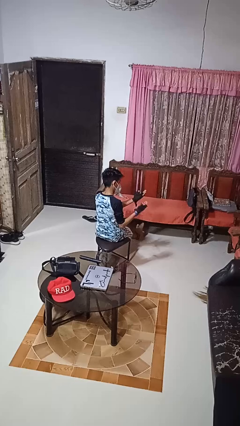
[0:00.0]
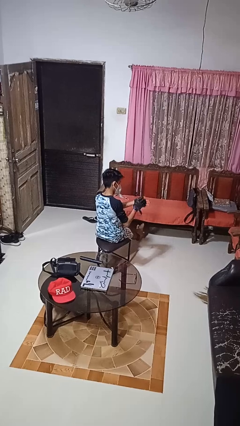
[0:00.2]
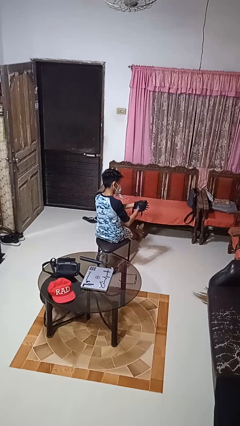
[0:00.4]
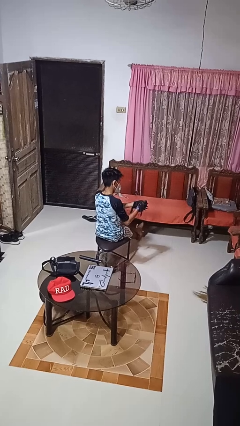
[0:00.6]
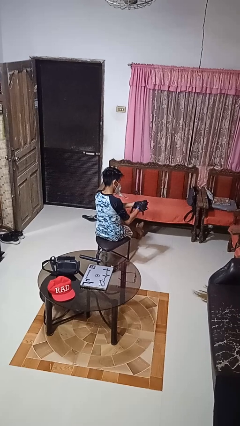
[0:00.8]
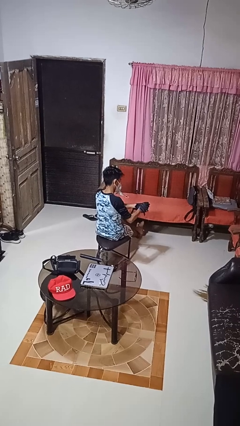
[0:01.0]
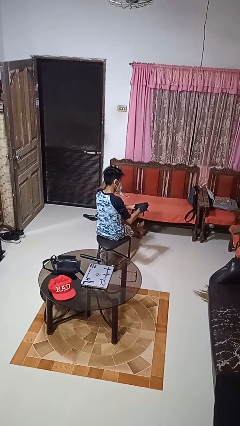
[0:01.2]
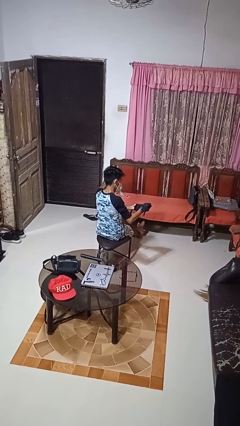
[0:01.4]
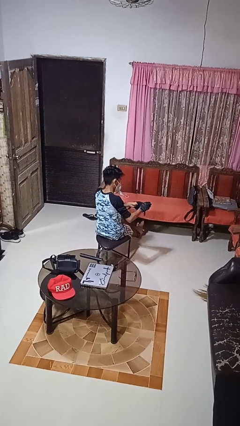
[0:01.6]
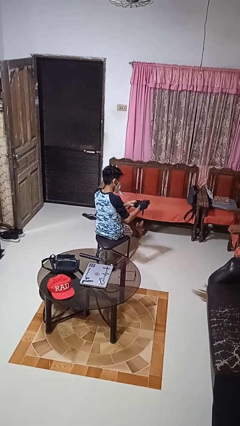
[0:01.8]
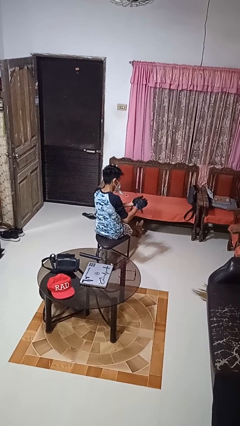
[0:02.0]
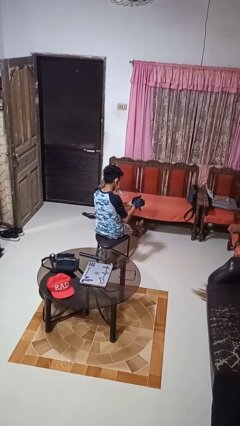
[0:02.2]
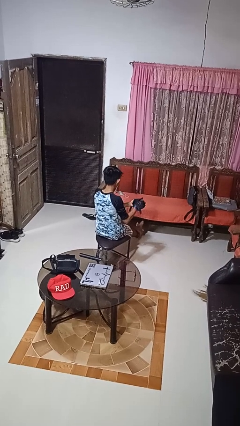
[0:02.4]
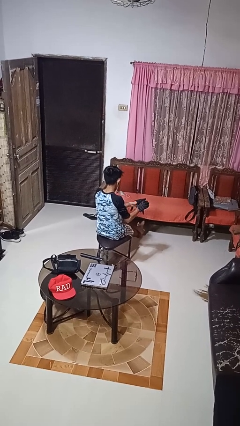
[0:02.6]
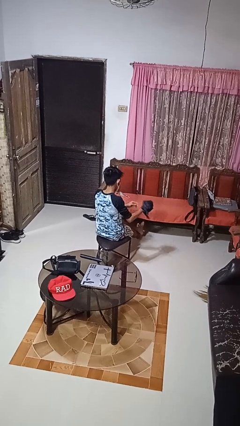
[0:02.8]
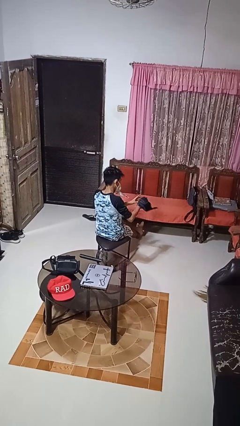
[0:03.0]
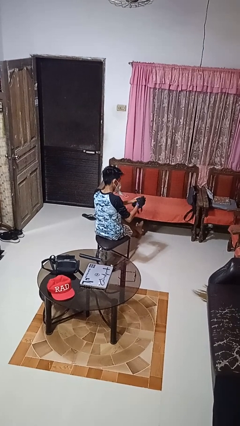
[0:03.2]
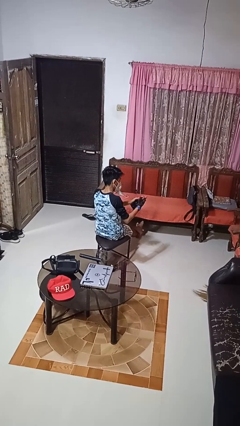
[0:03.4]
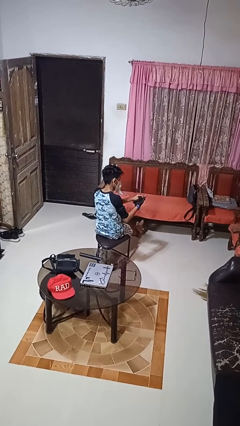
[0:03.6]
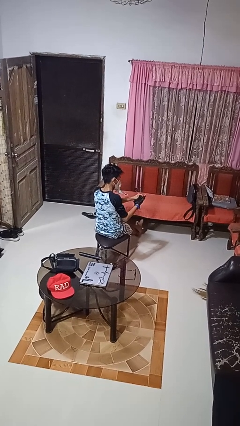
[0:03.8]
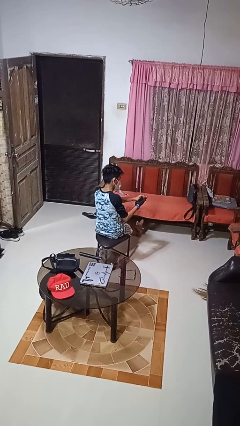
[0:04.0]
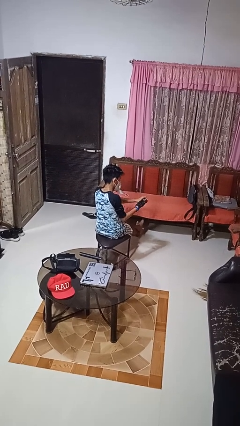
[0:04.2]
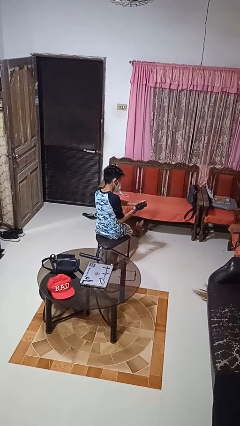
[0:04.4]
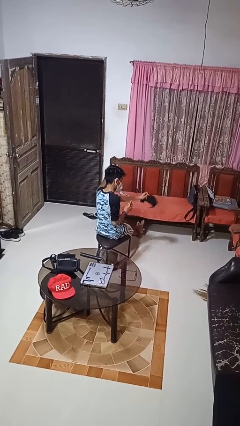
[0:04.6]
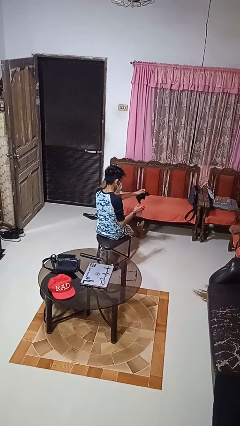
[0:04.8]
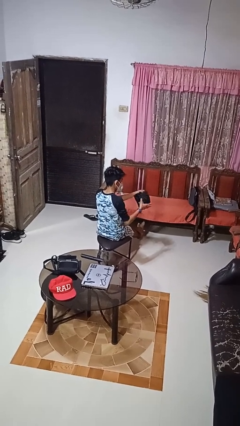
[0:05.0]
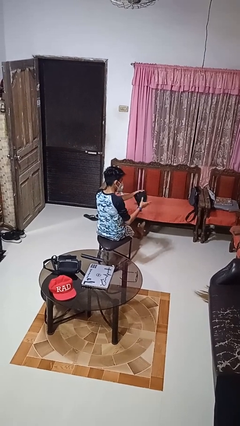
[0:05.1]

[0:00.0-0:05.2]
person takes off gloves

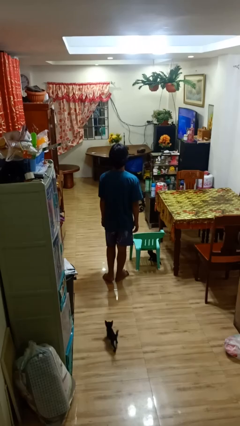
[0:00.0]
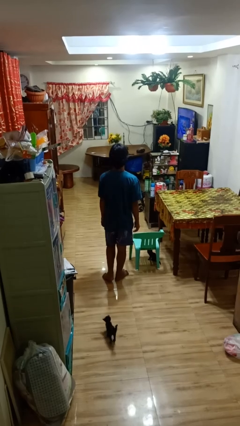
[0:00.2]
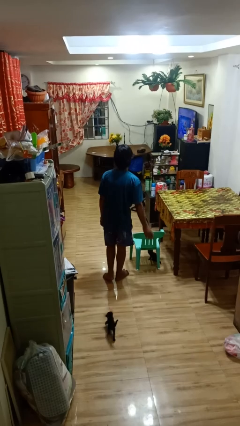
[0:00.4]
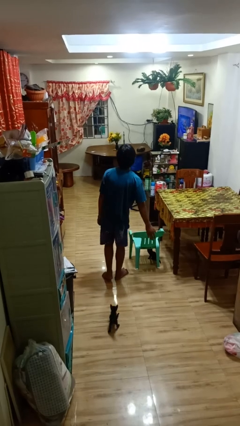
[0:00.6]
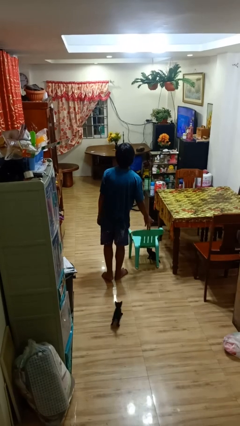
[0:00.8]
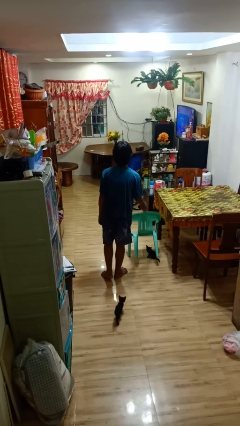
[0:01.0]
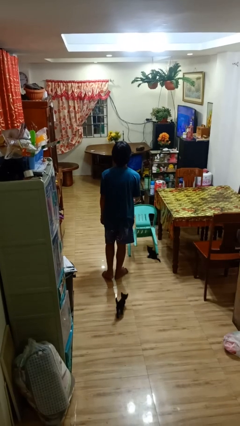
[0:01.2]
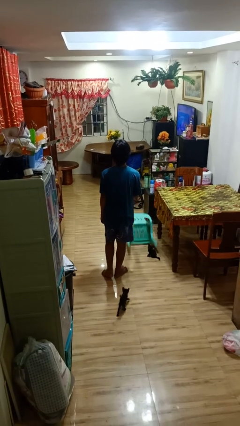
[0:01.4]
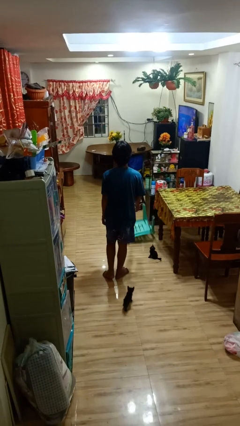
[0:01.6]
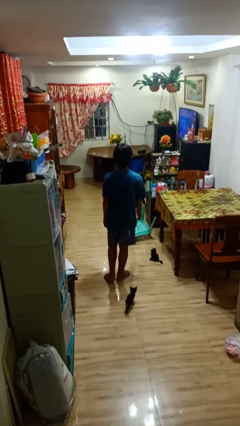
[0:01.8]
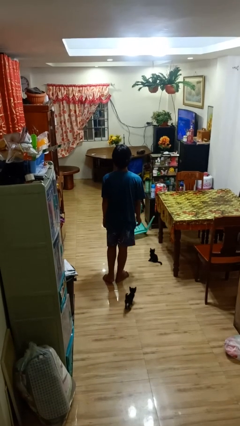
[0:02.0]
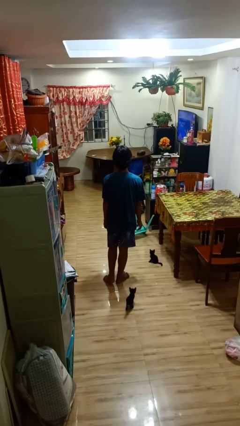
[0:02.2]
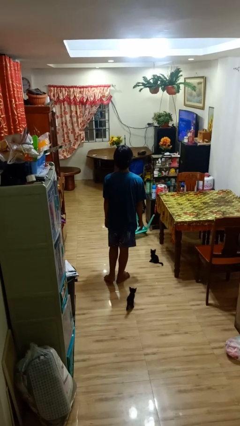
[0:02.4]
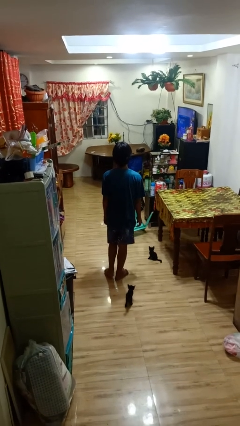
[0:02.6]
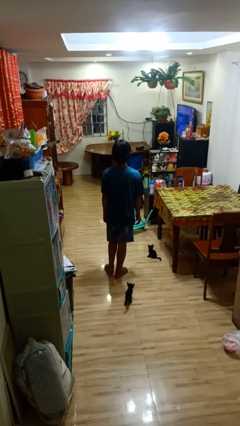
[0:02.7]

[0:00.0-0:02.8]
person knocks over furniture

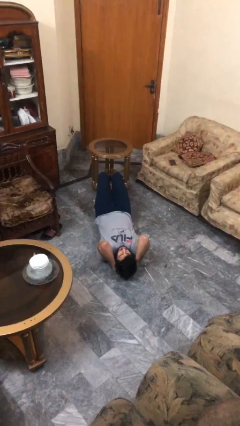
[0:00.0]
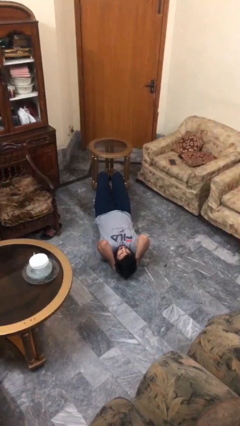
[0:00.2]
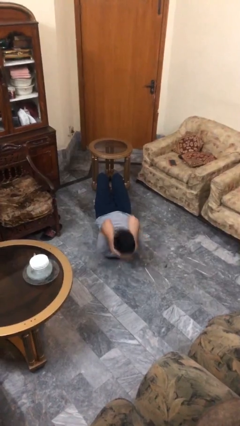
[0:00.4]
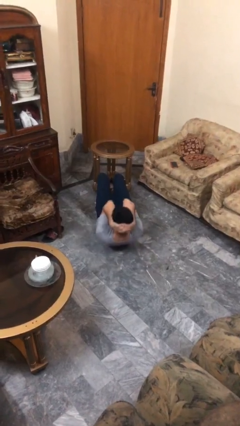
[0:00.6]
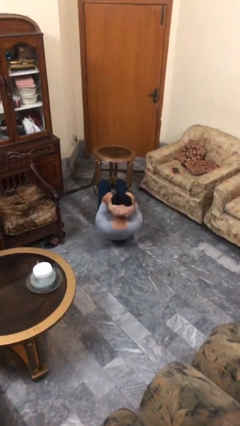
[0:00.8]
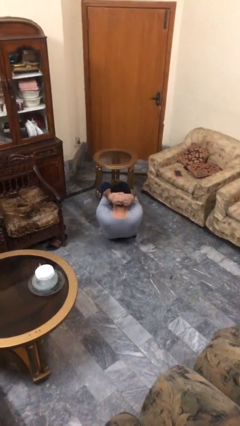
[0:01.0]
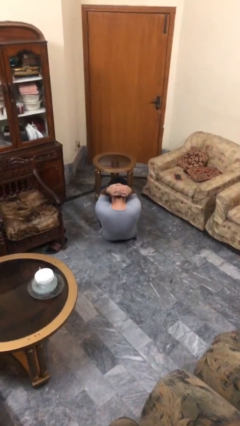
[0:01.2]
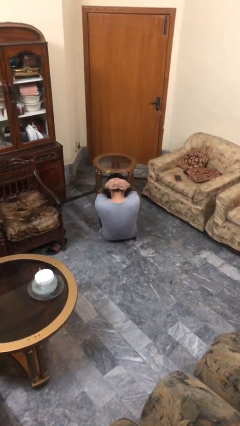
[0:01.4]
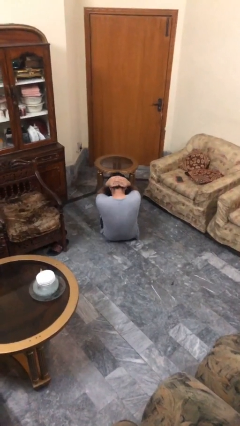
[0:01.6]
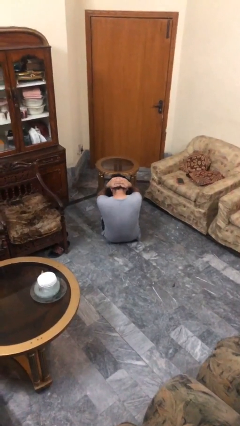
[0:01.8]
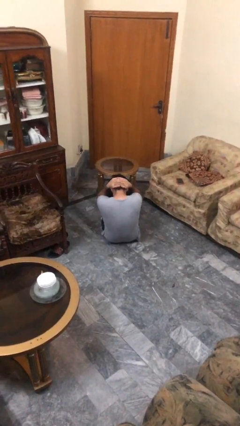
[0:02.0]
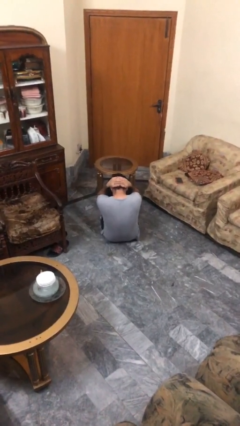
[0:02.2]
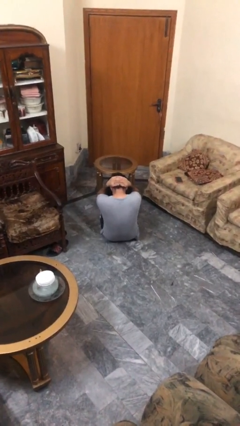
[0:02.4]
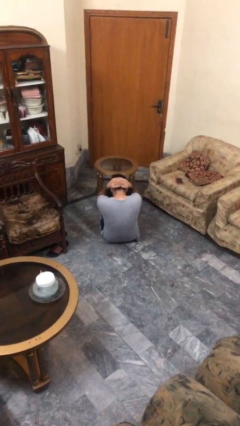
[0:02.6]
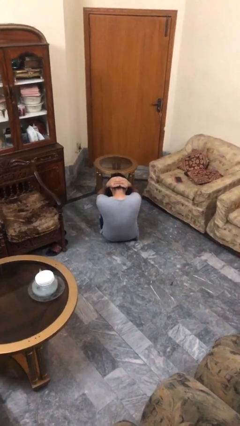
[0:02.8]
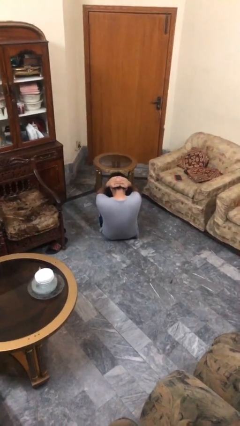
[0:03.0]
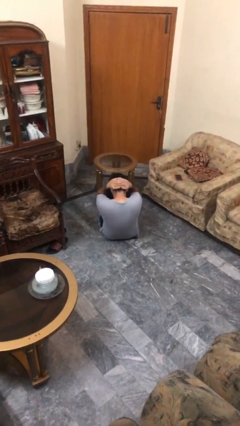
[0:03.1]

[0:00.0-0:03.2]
person exercises with situp

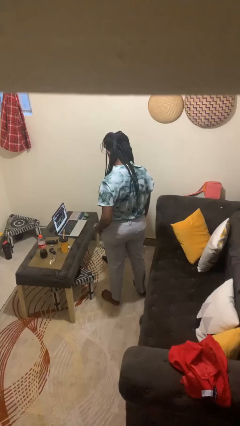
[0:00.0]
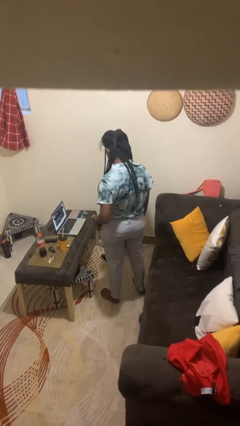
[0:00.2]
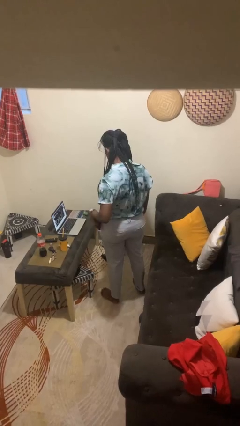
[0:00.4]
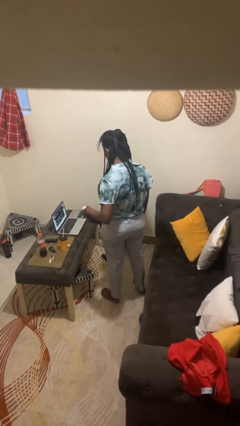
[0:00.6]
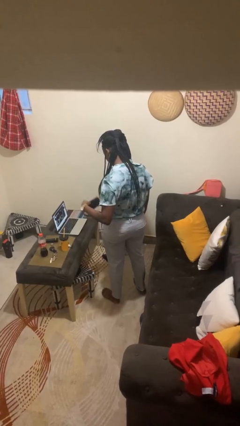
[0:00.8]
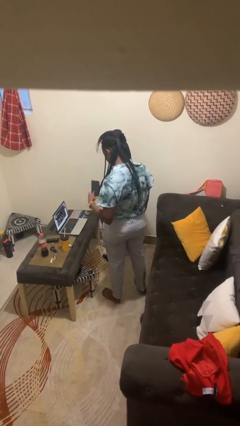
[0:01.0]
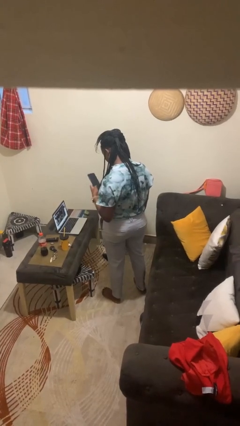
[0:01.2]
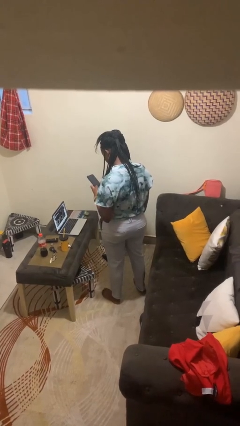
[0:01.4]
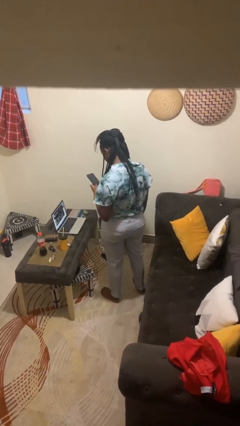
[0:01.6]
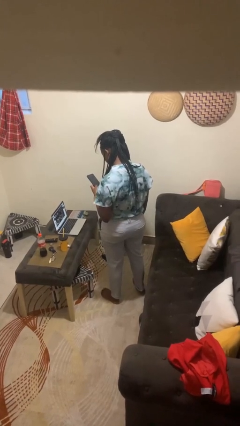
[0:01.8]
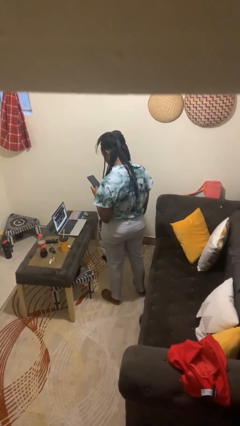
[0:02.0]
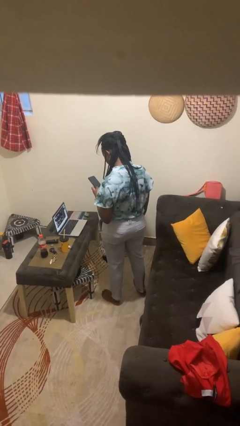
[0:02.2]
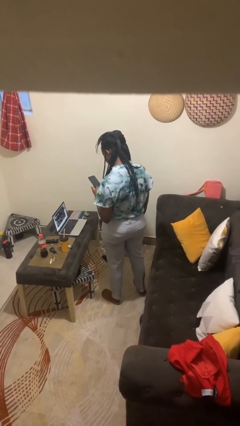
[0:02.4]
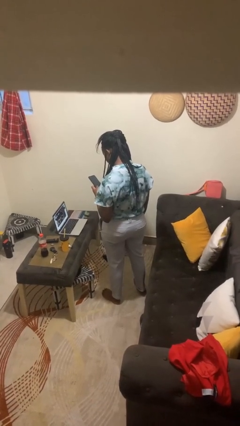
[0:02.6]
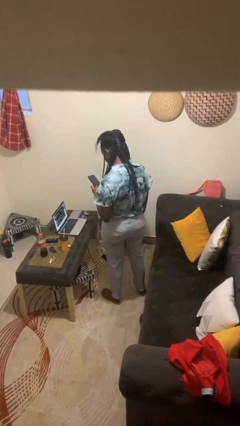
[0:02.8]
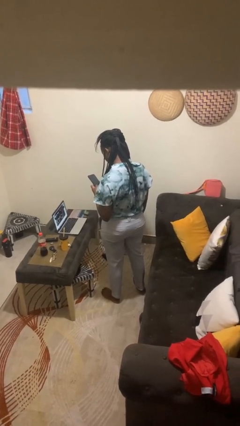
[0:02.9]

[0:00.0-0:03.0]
person takes phone from pocket

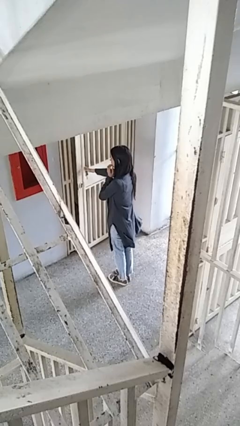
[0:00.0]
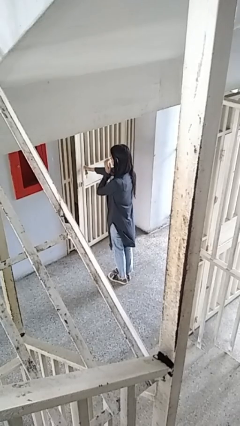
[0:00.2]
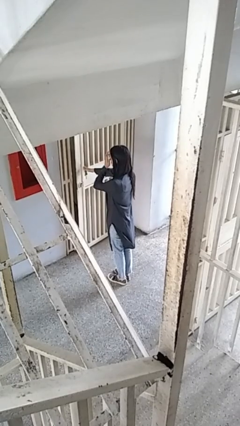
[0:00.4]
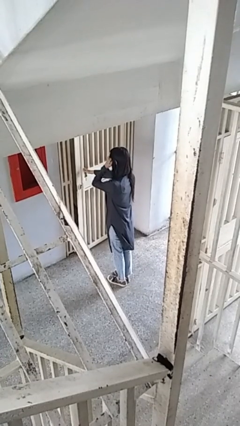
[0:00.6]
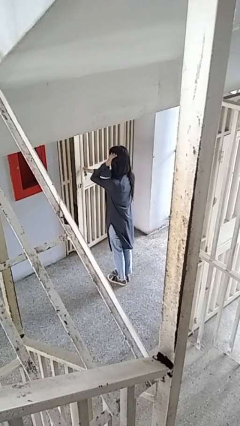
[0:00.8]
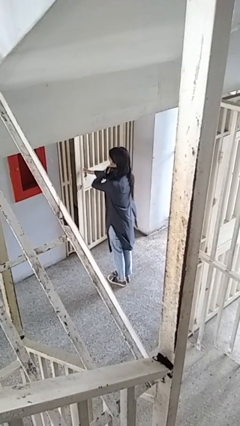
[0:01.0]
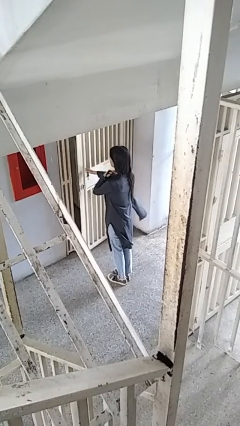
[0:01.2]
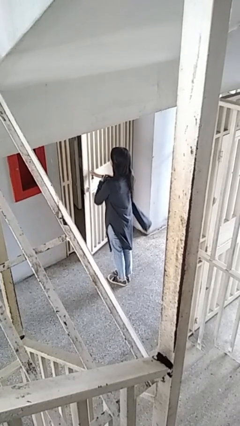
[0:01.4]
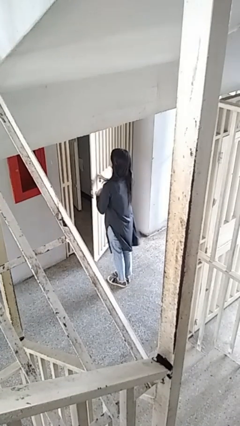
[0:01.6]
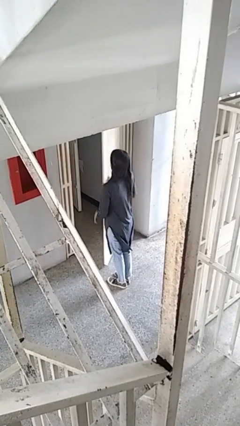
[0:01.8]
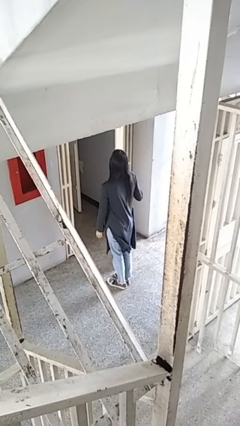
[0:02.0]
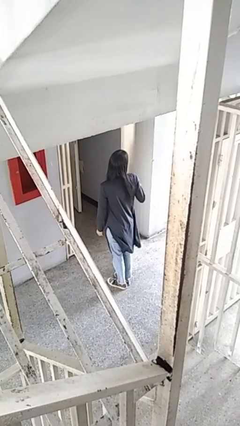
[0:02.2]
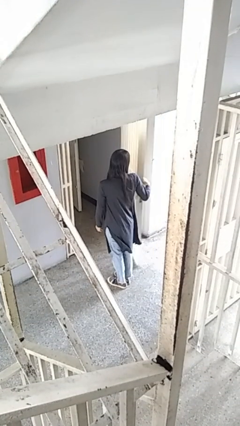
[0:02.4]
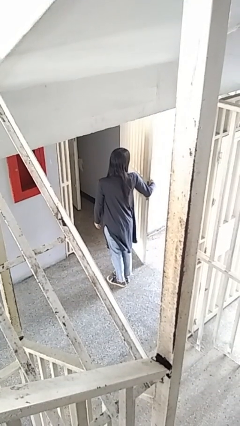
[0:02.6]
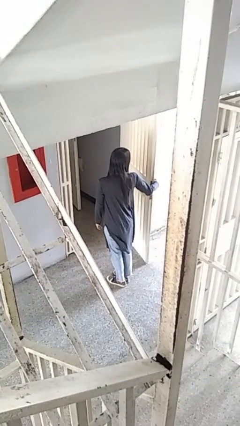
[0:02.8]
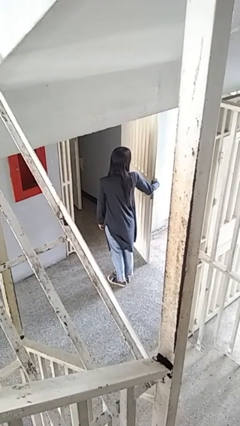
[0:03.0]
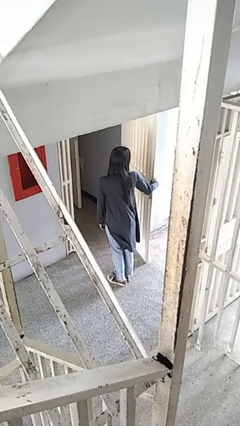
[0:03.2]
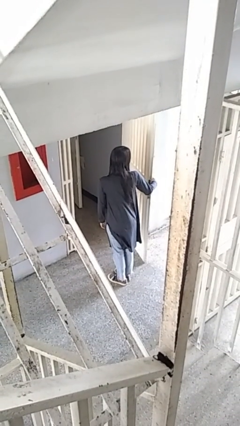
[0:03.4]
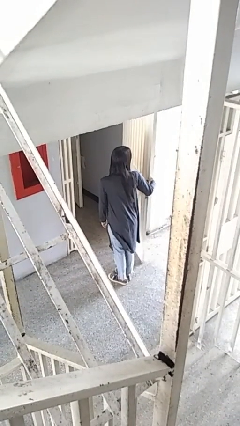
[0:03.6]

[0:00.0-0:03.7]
person opens gate
